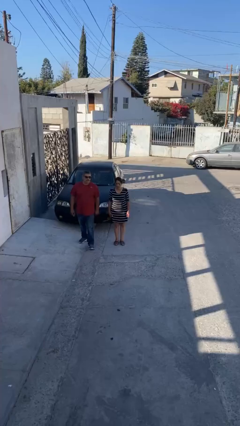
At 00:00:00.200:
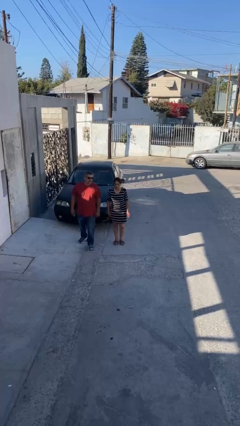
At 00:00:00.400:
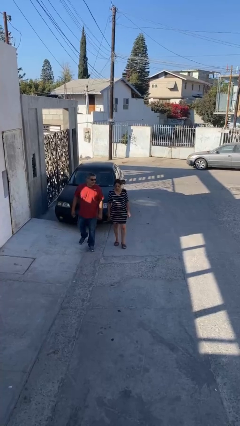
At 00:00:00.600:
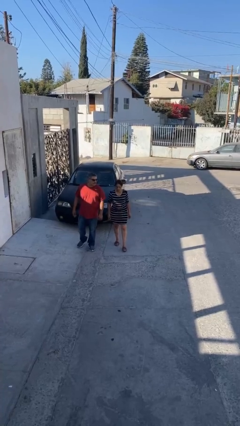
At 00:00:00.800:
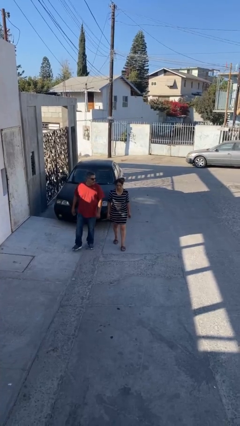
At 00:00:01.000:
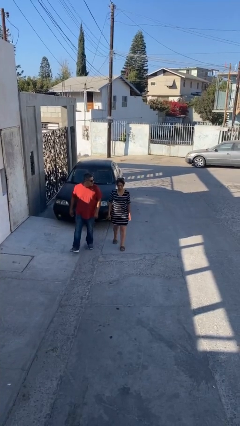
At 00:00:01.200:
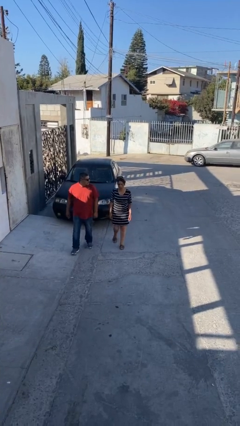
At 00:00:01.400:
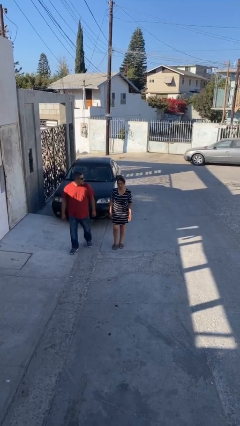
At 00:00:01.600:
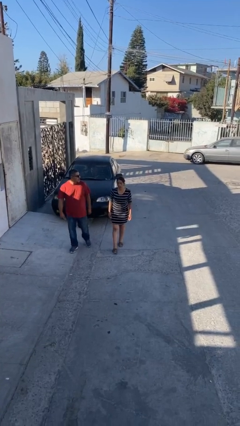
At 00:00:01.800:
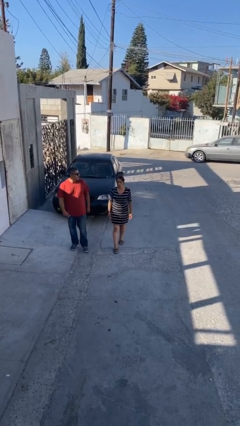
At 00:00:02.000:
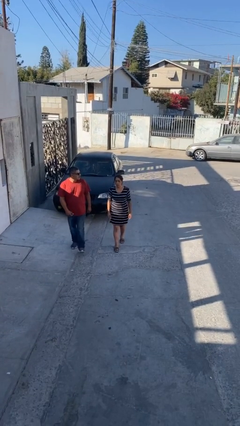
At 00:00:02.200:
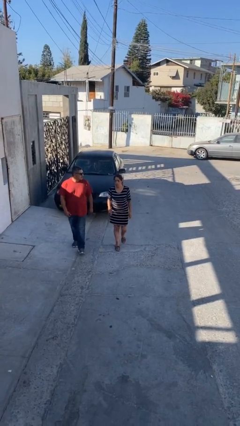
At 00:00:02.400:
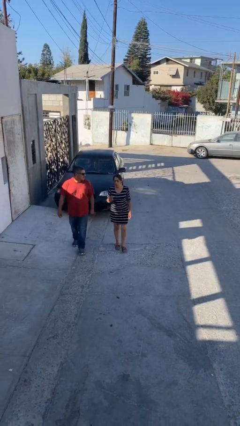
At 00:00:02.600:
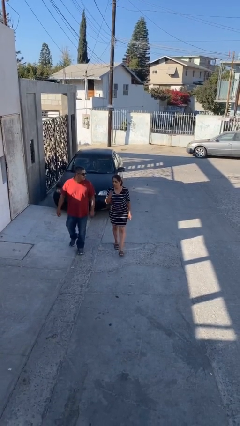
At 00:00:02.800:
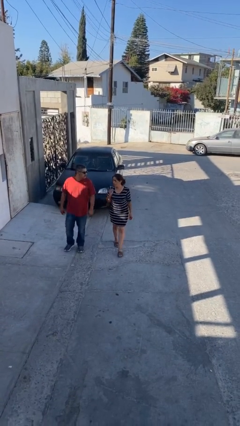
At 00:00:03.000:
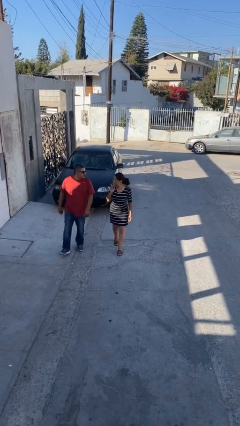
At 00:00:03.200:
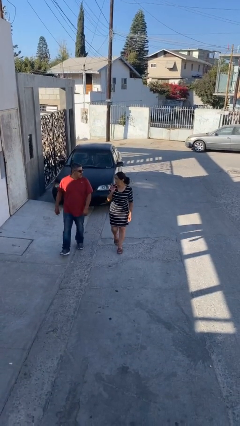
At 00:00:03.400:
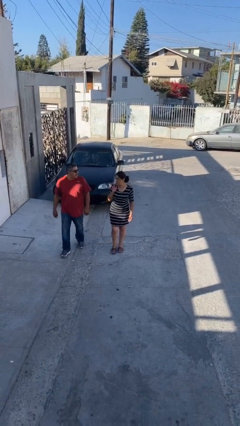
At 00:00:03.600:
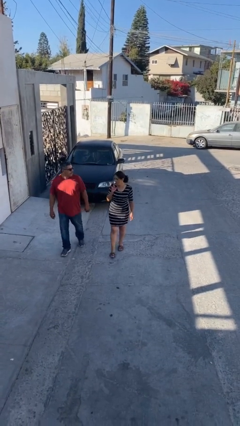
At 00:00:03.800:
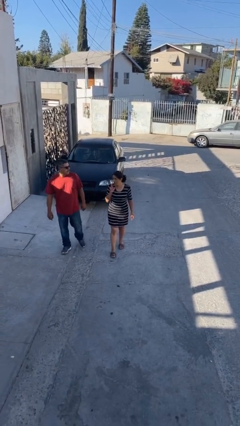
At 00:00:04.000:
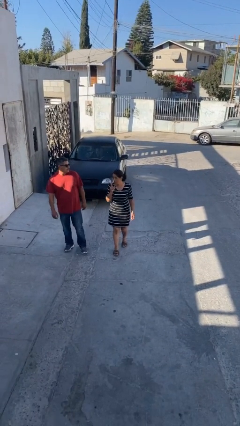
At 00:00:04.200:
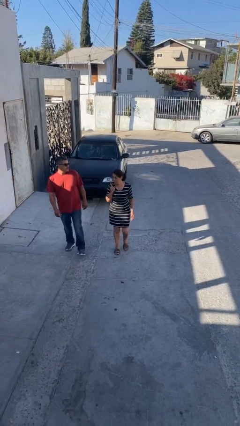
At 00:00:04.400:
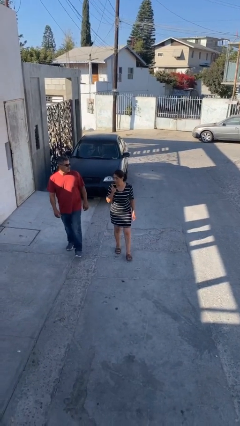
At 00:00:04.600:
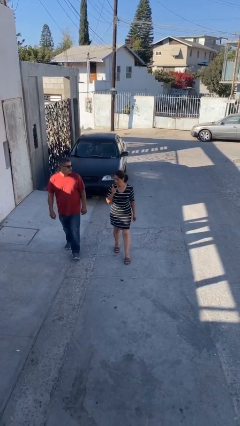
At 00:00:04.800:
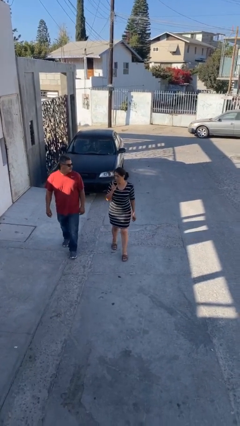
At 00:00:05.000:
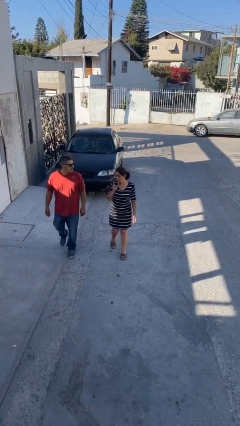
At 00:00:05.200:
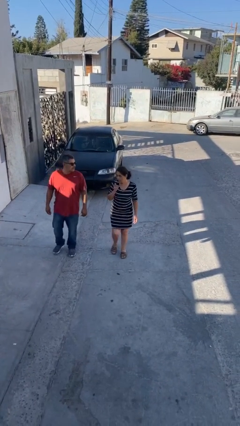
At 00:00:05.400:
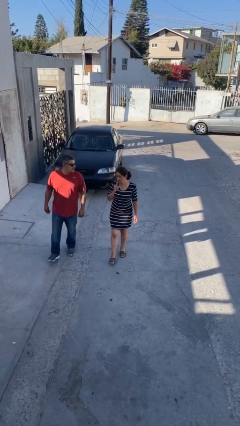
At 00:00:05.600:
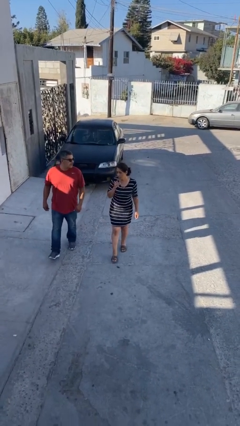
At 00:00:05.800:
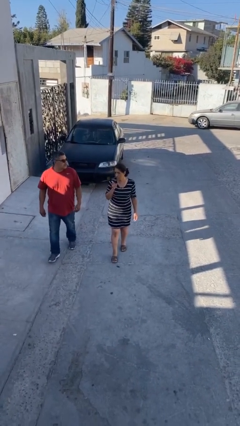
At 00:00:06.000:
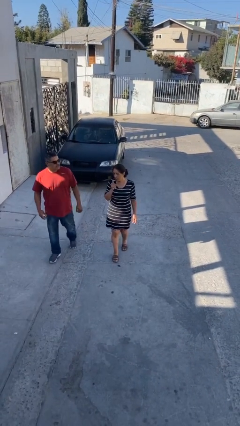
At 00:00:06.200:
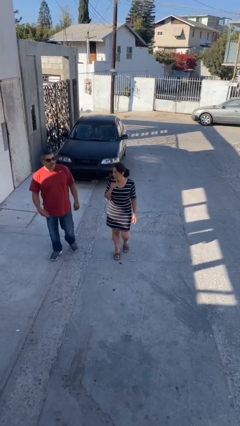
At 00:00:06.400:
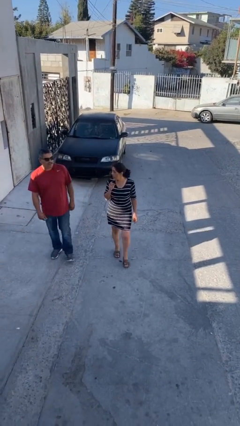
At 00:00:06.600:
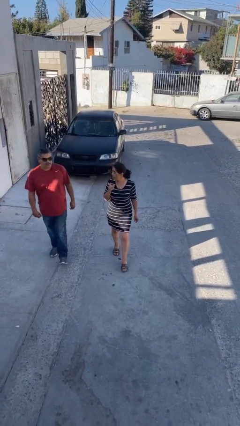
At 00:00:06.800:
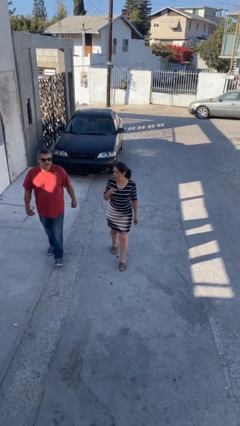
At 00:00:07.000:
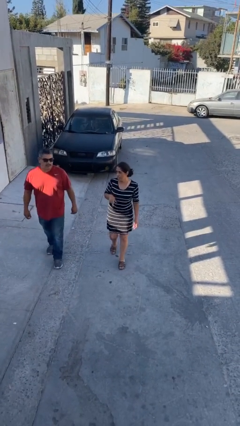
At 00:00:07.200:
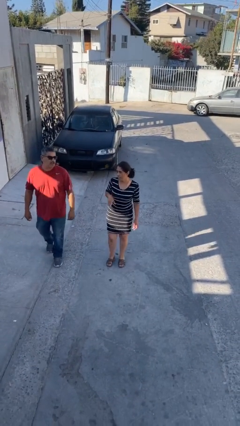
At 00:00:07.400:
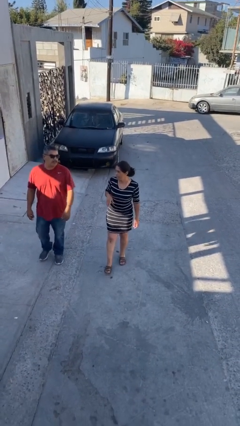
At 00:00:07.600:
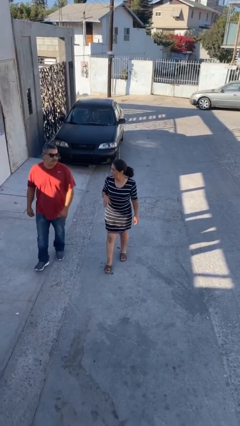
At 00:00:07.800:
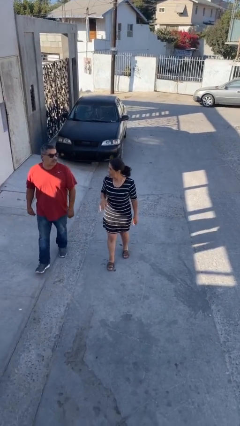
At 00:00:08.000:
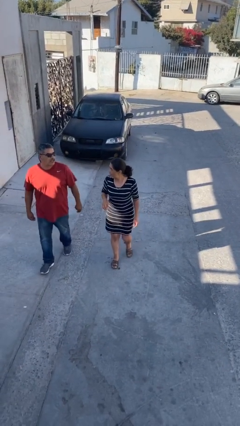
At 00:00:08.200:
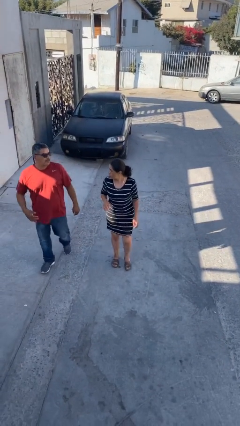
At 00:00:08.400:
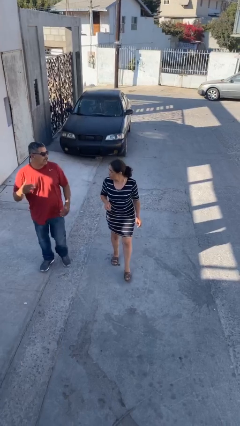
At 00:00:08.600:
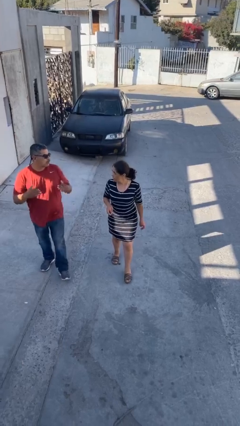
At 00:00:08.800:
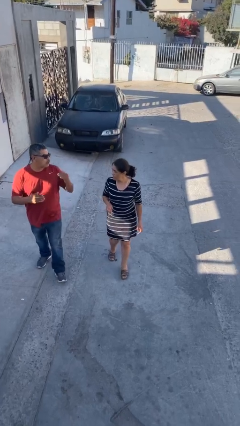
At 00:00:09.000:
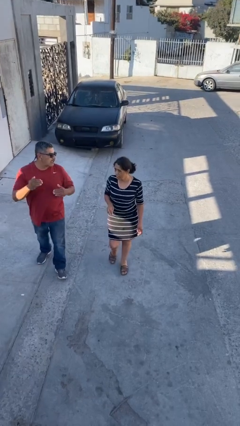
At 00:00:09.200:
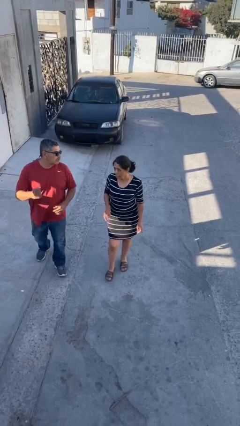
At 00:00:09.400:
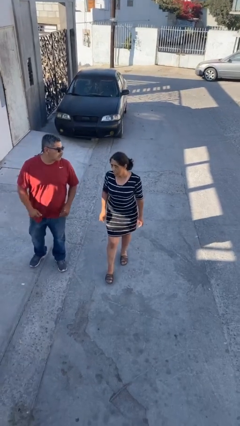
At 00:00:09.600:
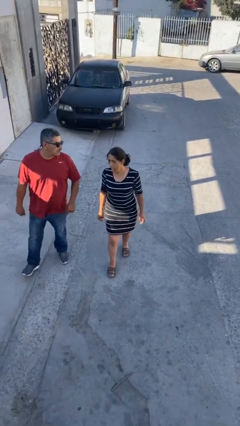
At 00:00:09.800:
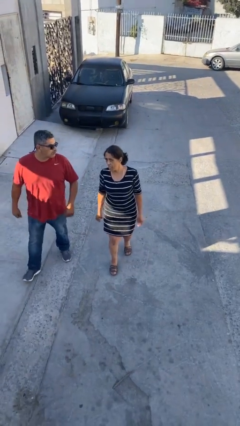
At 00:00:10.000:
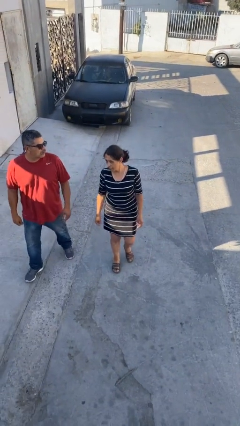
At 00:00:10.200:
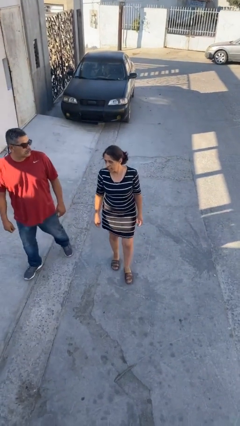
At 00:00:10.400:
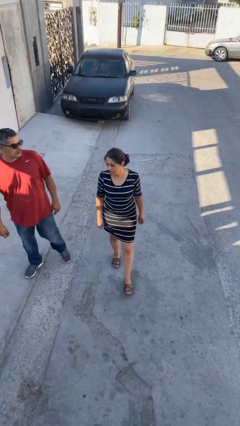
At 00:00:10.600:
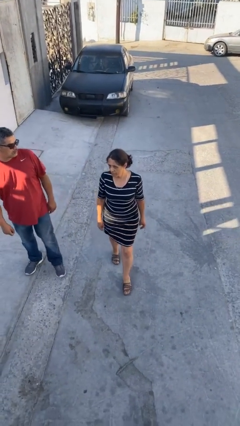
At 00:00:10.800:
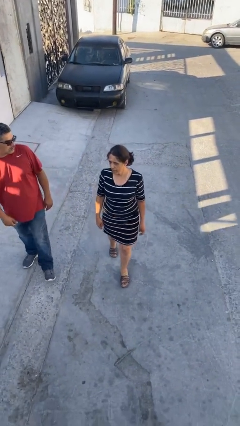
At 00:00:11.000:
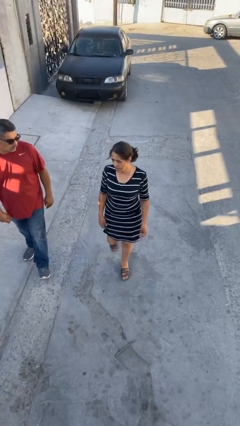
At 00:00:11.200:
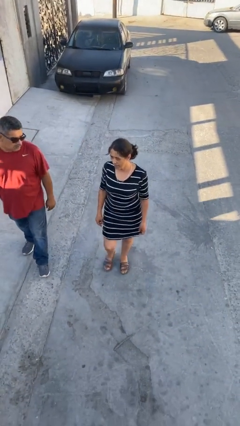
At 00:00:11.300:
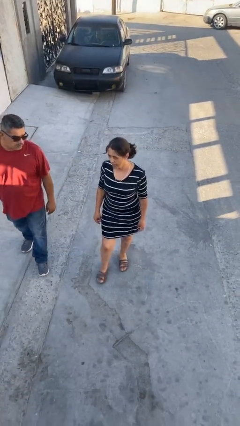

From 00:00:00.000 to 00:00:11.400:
person talks to person

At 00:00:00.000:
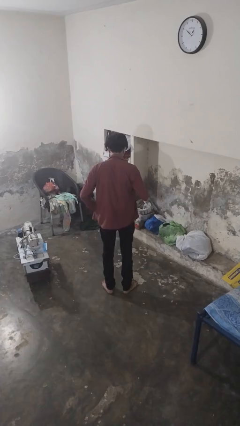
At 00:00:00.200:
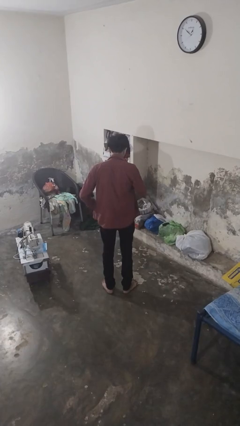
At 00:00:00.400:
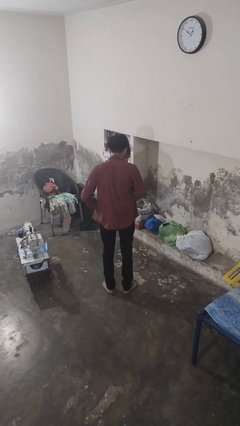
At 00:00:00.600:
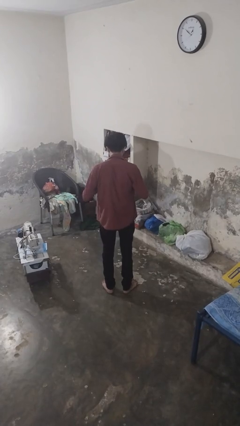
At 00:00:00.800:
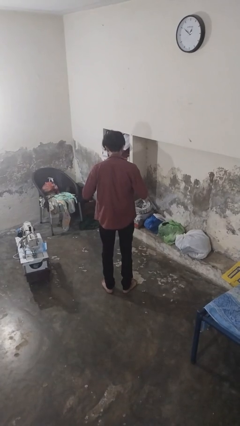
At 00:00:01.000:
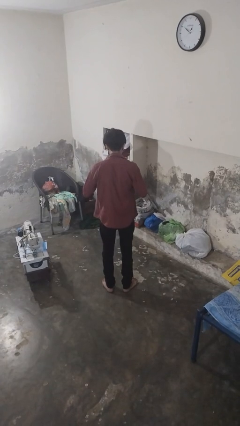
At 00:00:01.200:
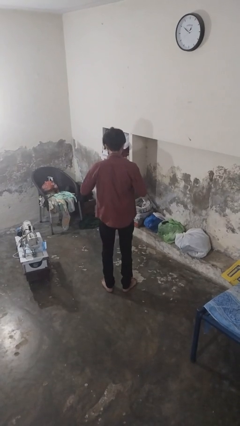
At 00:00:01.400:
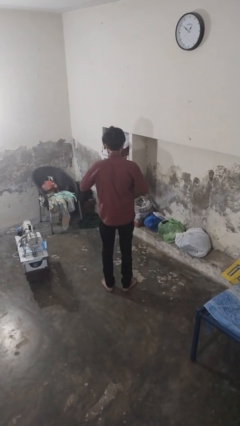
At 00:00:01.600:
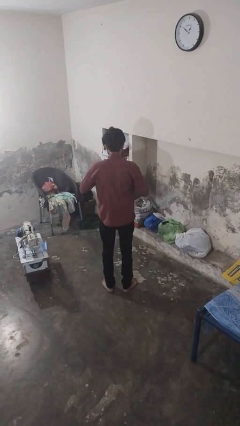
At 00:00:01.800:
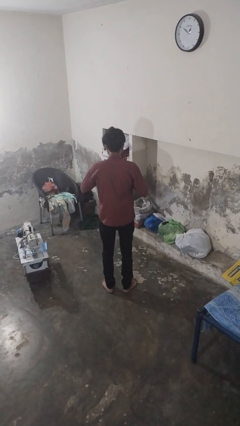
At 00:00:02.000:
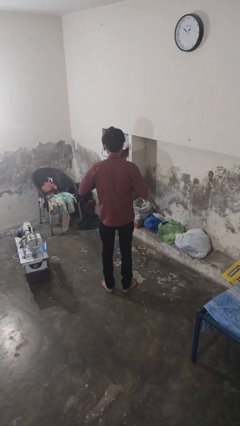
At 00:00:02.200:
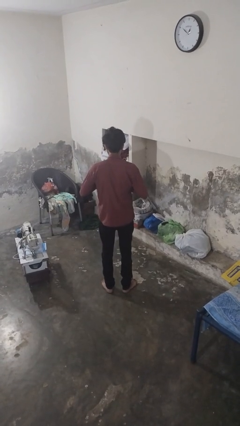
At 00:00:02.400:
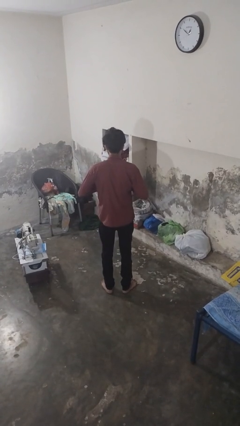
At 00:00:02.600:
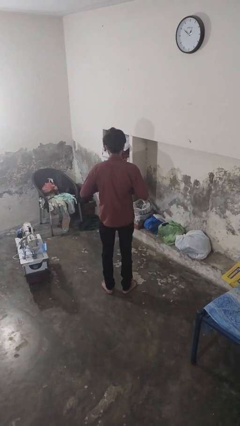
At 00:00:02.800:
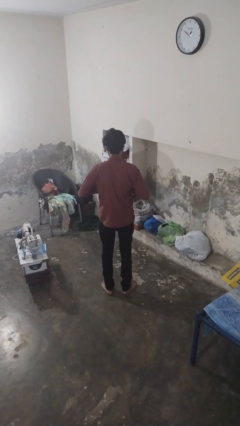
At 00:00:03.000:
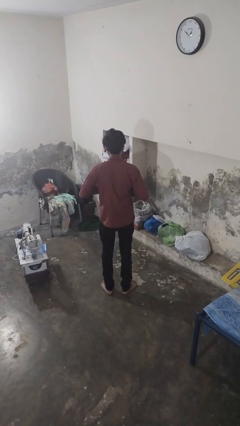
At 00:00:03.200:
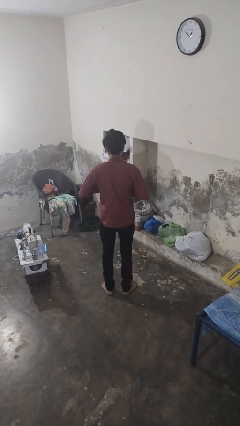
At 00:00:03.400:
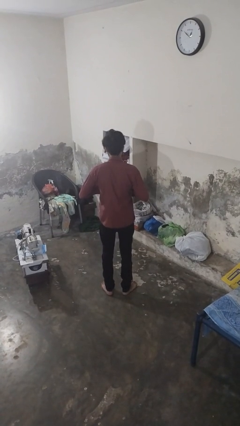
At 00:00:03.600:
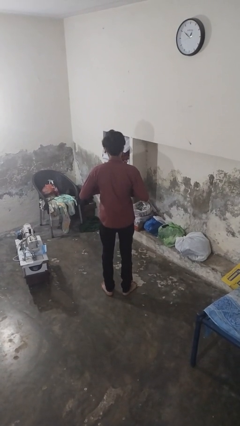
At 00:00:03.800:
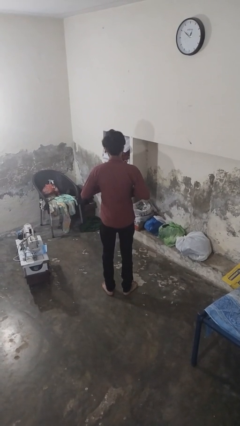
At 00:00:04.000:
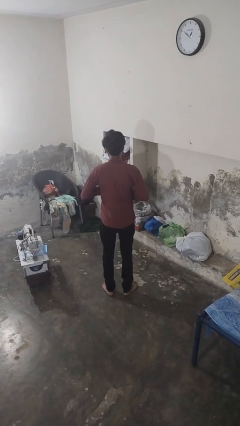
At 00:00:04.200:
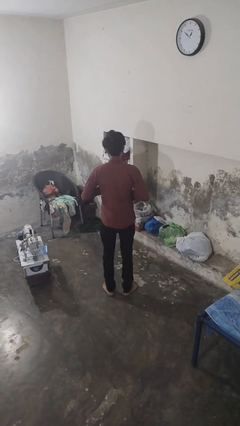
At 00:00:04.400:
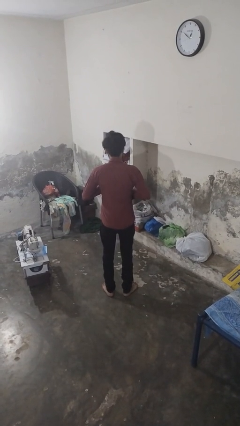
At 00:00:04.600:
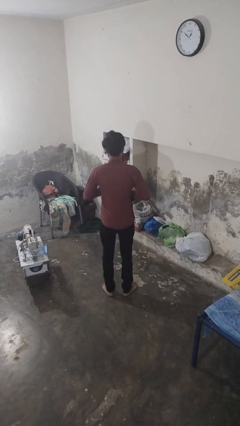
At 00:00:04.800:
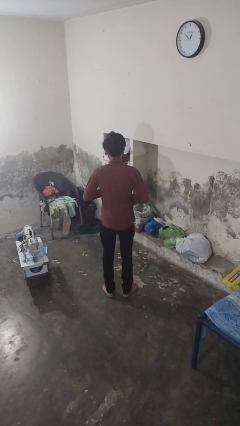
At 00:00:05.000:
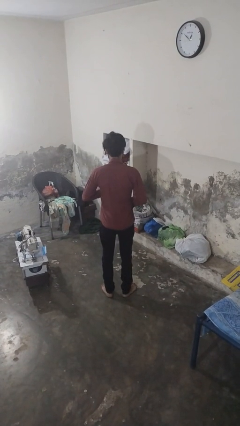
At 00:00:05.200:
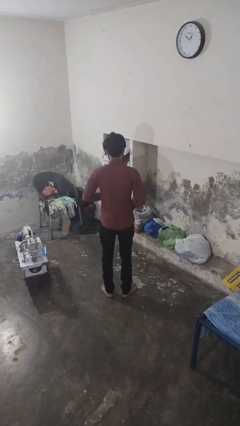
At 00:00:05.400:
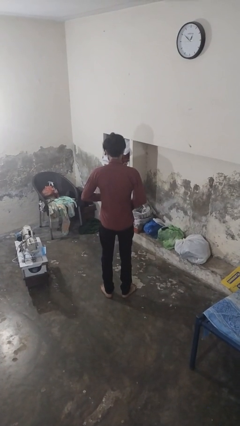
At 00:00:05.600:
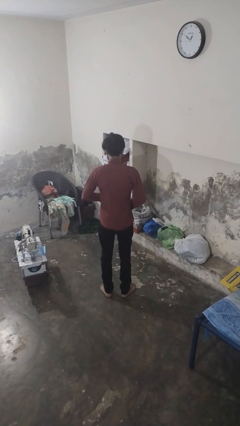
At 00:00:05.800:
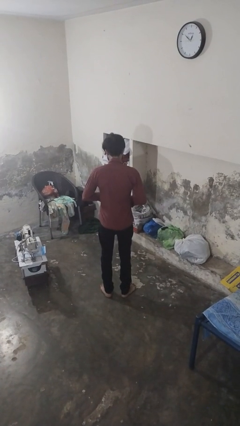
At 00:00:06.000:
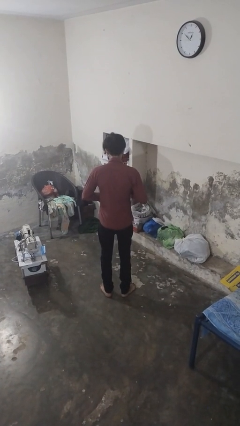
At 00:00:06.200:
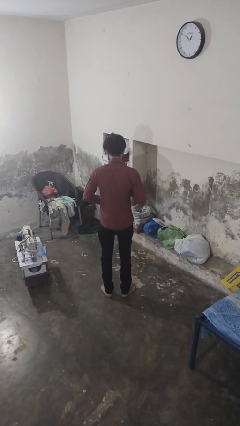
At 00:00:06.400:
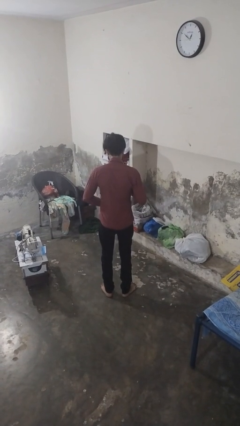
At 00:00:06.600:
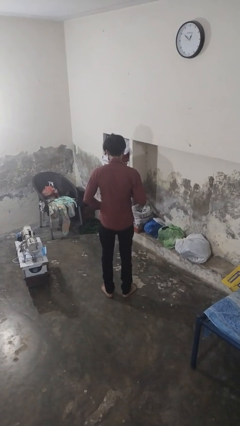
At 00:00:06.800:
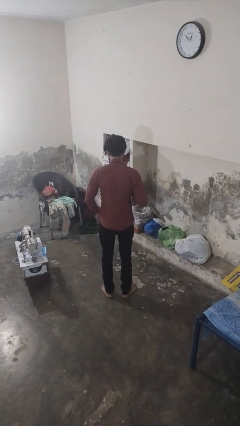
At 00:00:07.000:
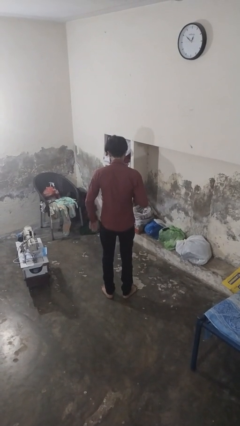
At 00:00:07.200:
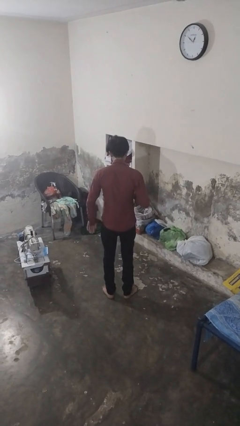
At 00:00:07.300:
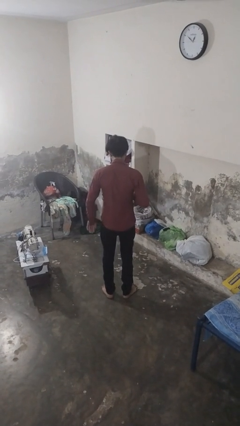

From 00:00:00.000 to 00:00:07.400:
person buttons shirt
